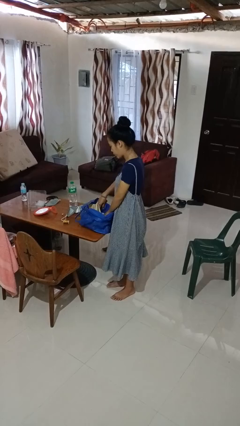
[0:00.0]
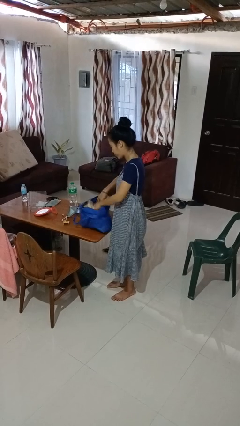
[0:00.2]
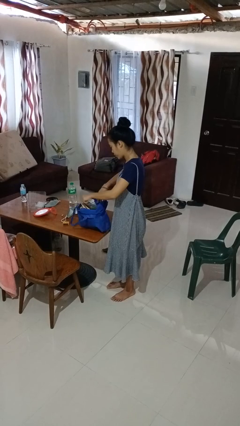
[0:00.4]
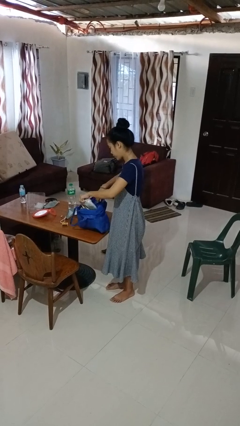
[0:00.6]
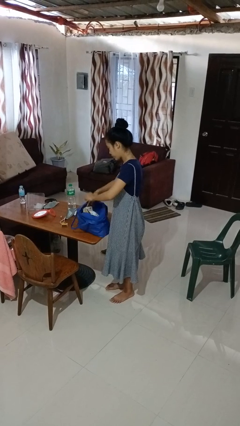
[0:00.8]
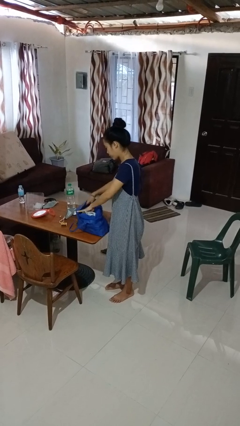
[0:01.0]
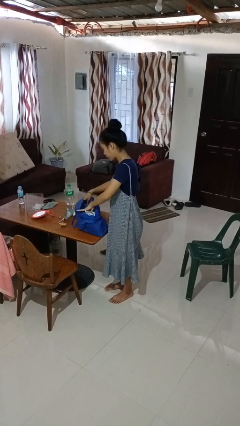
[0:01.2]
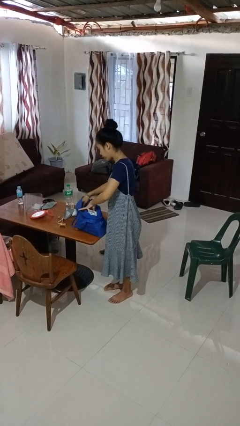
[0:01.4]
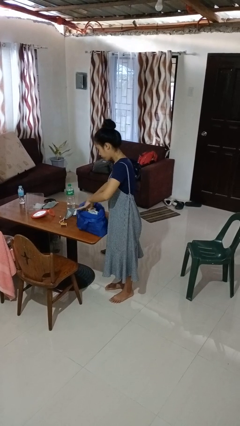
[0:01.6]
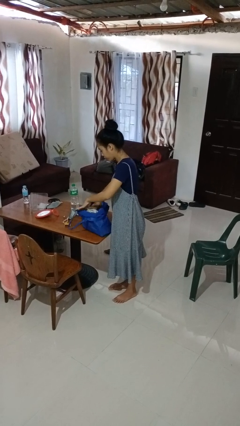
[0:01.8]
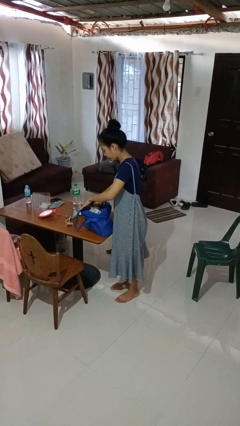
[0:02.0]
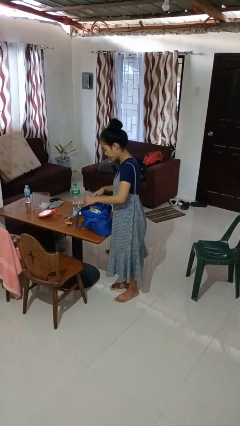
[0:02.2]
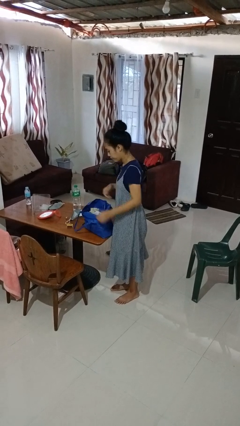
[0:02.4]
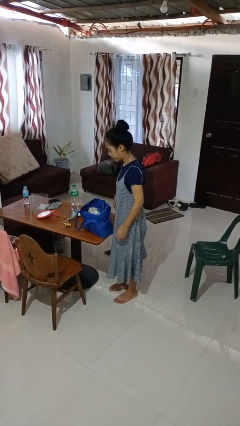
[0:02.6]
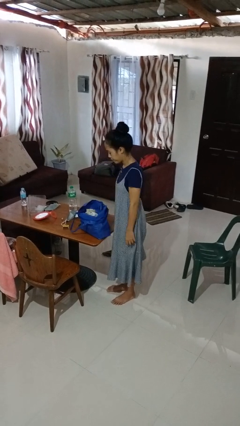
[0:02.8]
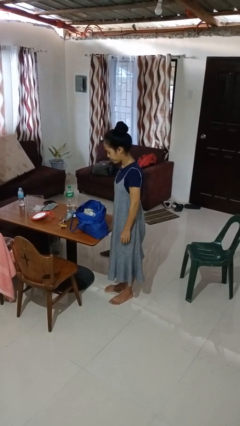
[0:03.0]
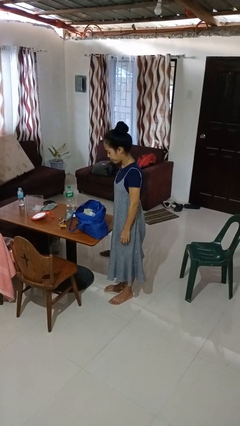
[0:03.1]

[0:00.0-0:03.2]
person searches in bag

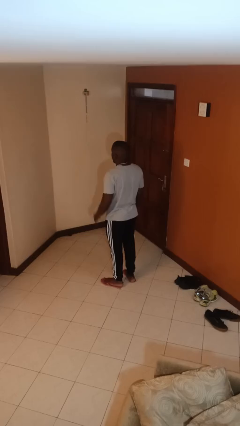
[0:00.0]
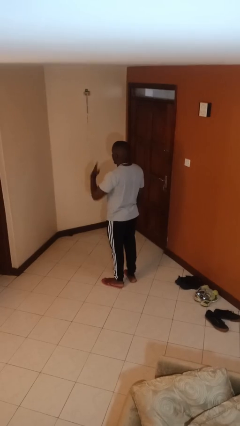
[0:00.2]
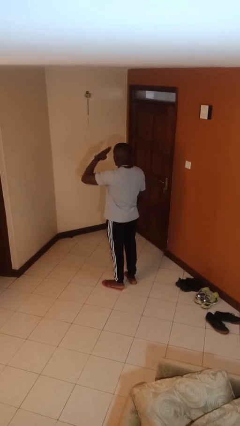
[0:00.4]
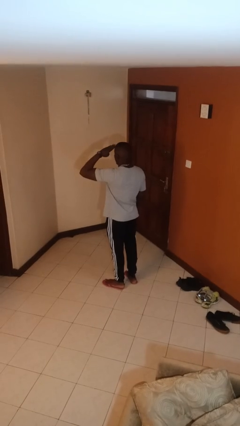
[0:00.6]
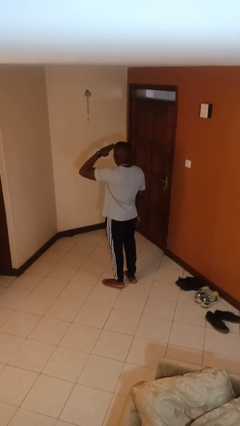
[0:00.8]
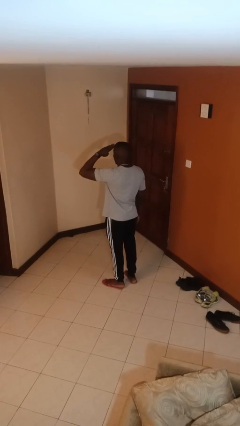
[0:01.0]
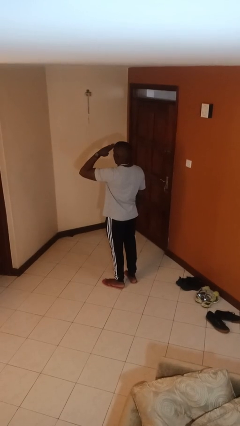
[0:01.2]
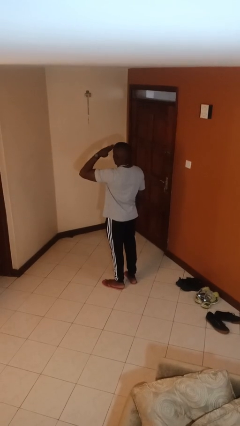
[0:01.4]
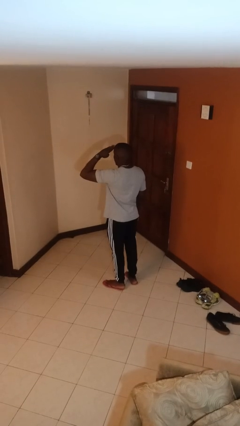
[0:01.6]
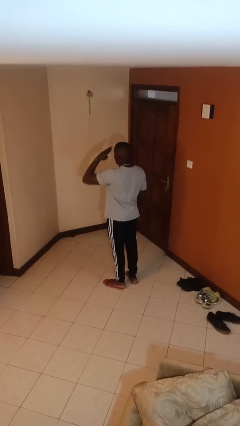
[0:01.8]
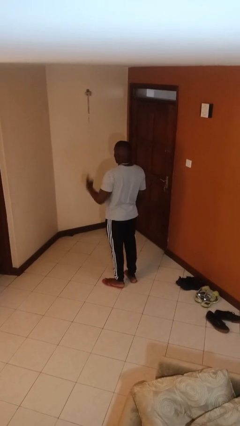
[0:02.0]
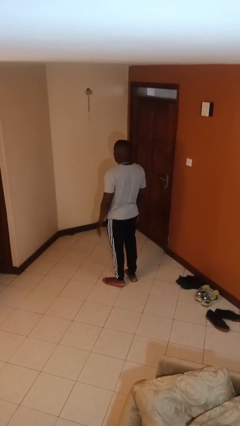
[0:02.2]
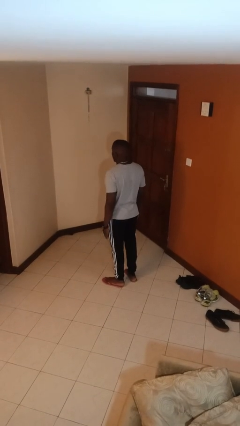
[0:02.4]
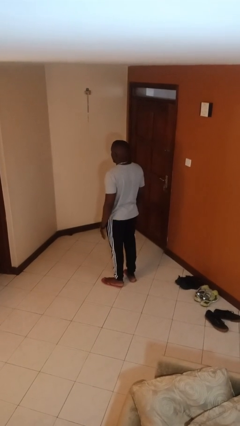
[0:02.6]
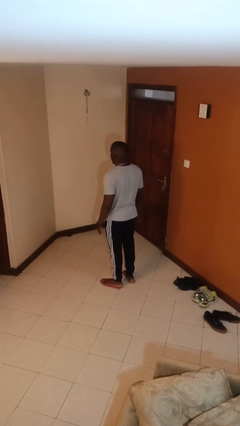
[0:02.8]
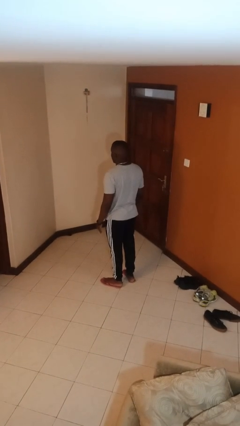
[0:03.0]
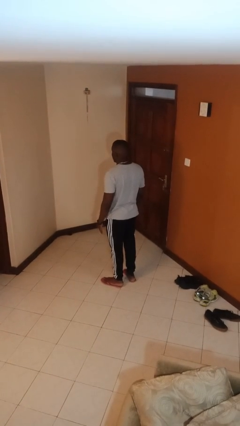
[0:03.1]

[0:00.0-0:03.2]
person salutes

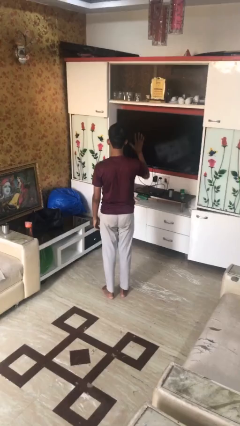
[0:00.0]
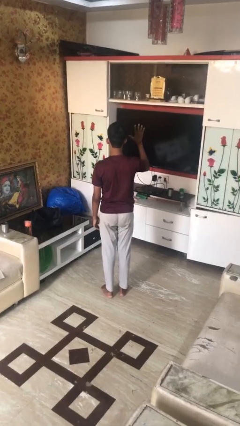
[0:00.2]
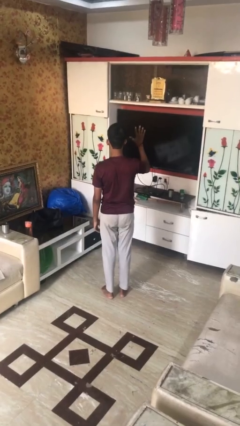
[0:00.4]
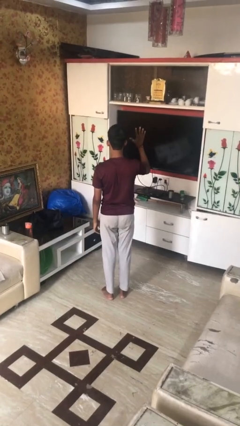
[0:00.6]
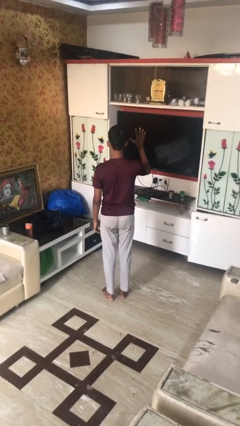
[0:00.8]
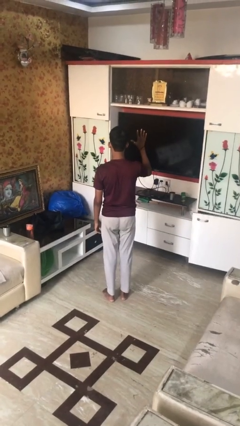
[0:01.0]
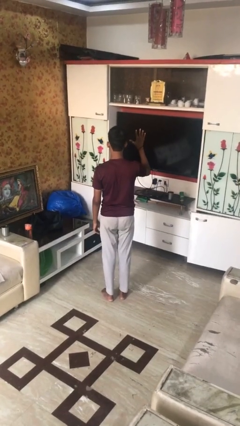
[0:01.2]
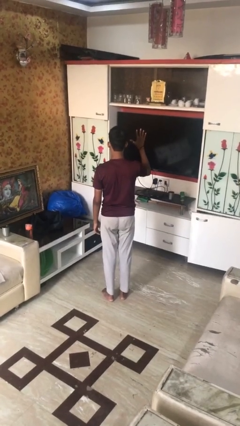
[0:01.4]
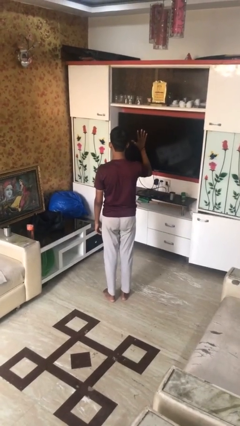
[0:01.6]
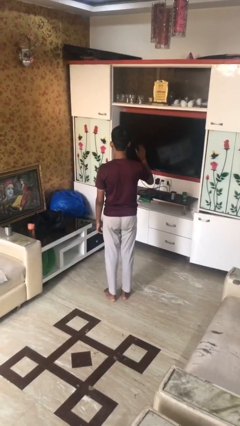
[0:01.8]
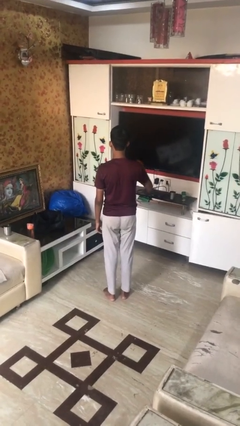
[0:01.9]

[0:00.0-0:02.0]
person gestures number five

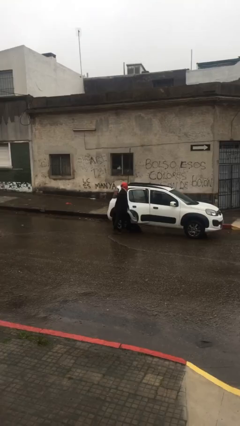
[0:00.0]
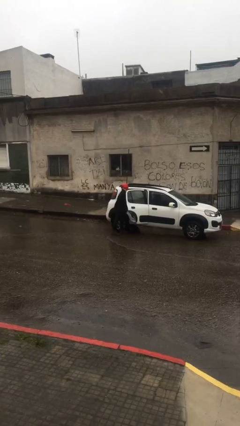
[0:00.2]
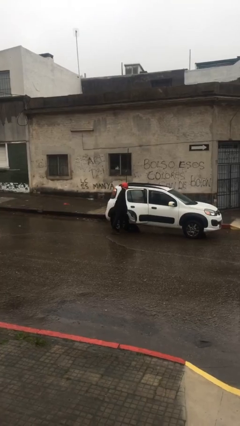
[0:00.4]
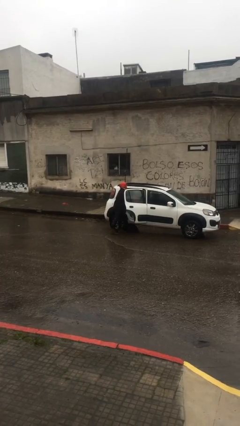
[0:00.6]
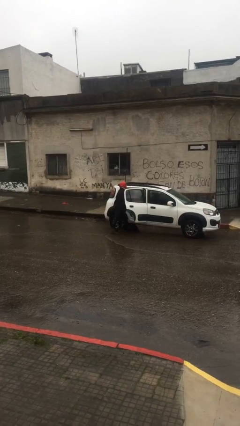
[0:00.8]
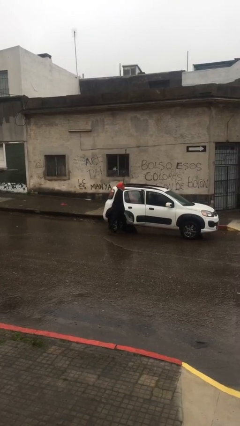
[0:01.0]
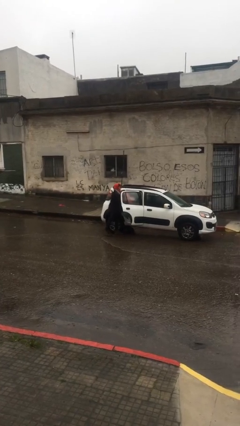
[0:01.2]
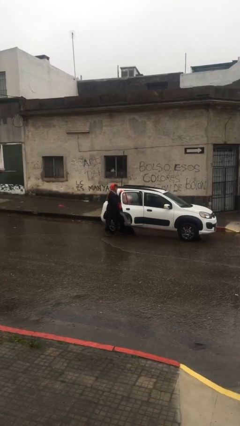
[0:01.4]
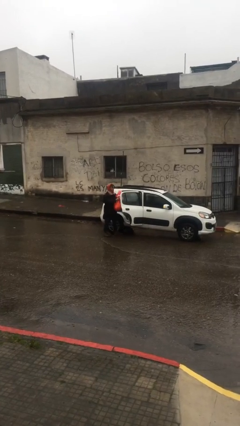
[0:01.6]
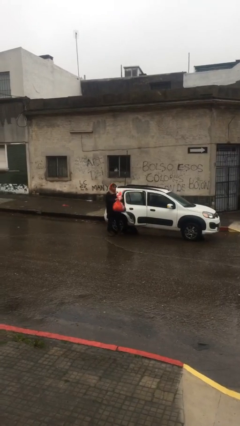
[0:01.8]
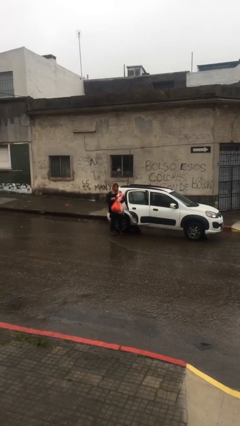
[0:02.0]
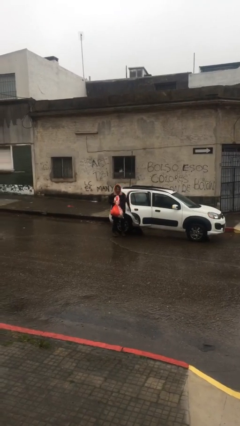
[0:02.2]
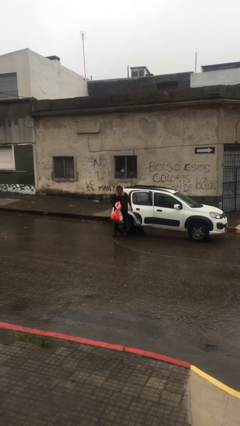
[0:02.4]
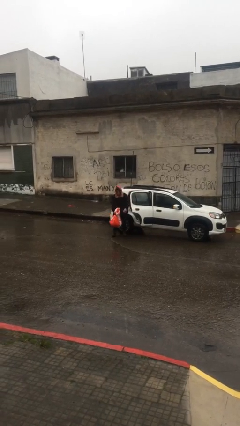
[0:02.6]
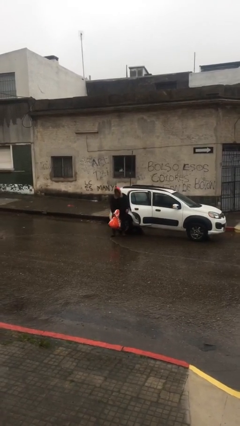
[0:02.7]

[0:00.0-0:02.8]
person unloads car

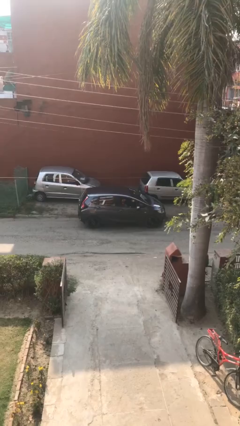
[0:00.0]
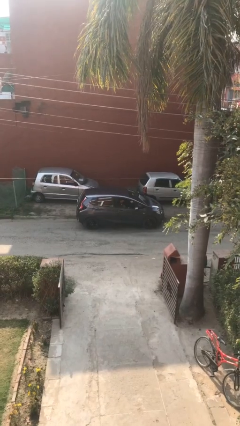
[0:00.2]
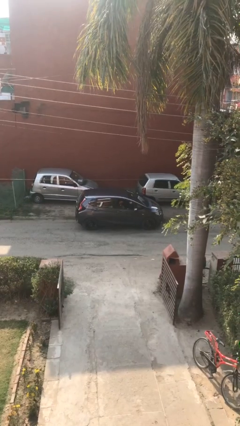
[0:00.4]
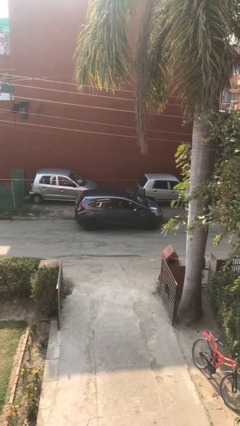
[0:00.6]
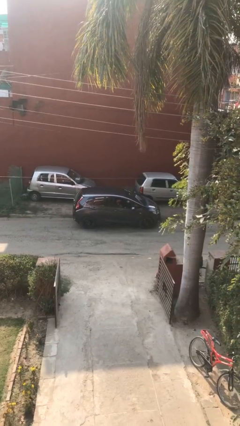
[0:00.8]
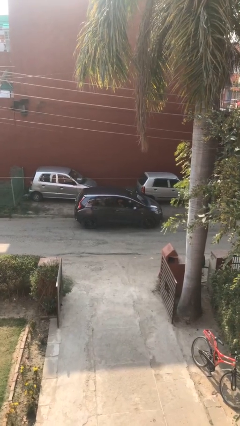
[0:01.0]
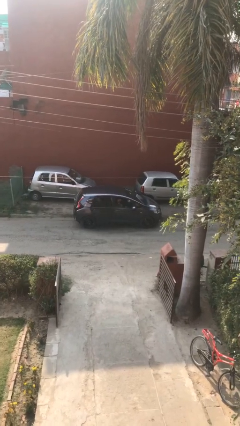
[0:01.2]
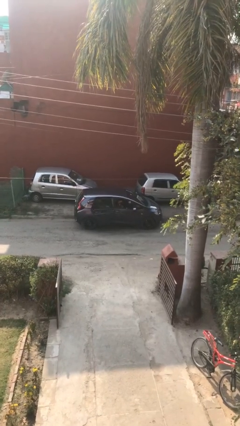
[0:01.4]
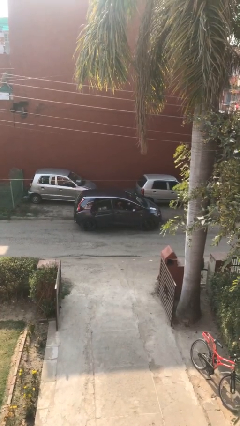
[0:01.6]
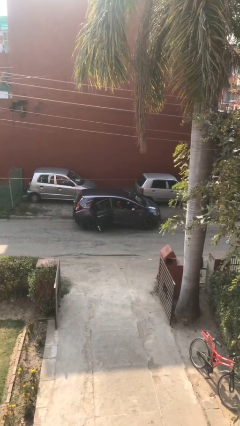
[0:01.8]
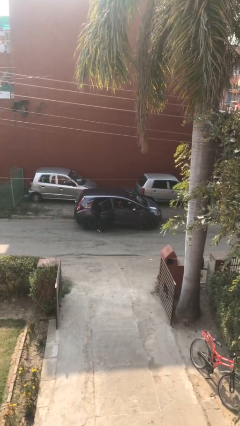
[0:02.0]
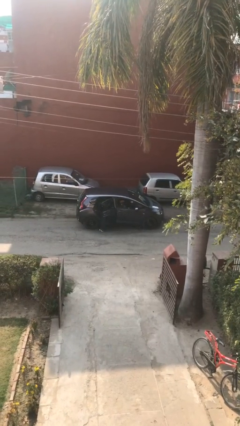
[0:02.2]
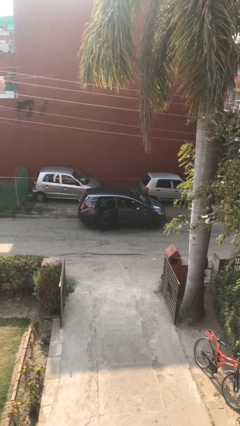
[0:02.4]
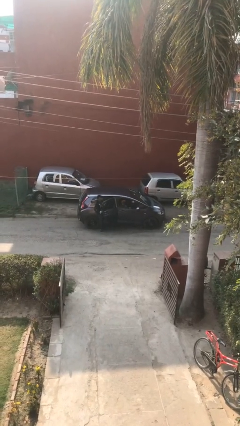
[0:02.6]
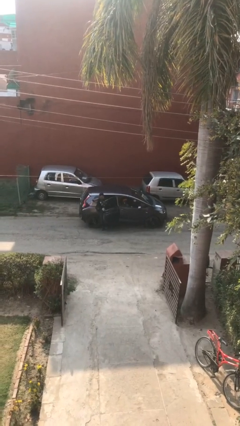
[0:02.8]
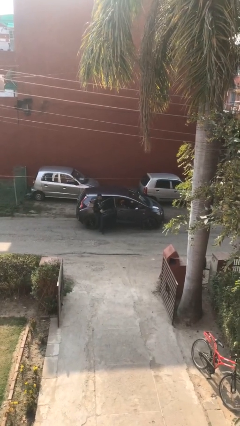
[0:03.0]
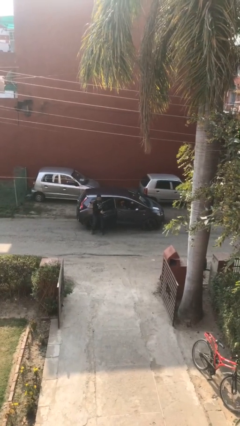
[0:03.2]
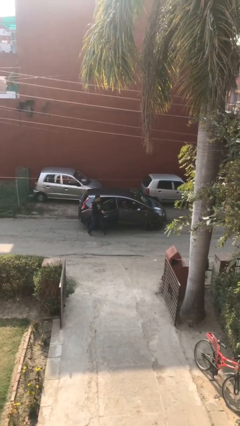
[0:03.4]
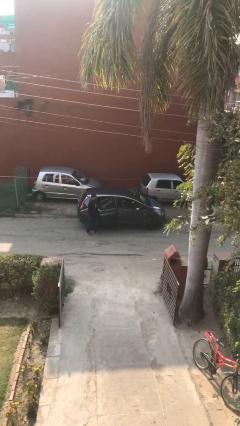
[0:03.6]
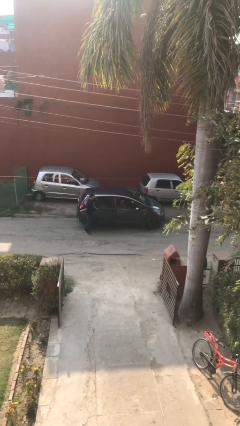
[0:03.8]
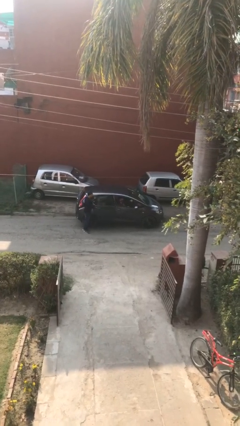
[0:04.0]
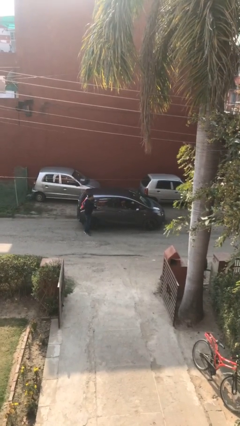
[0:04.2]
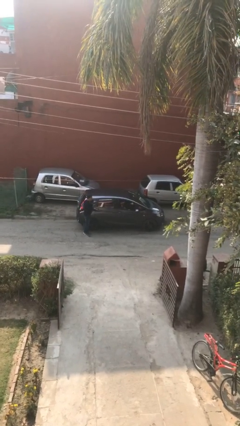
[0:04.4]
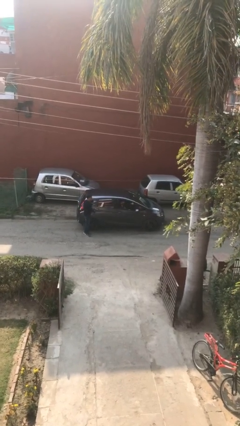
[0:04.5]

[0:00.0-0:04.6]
car drops off person

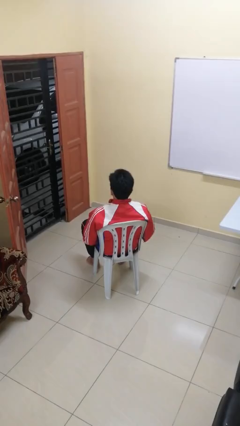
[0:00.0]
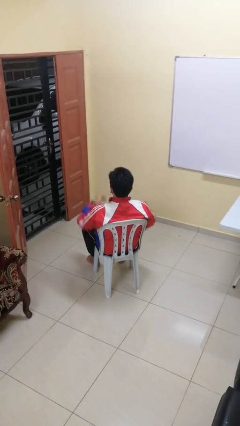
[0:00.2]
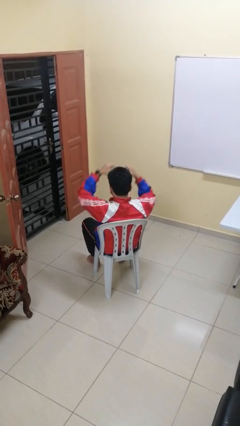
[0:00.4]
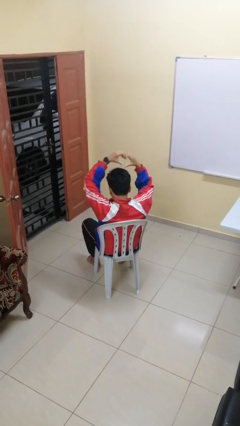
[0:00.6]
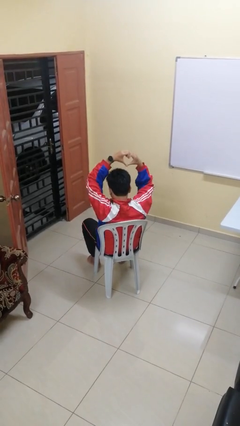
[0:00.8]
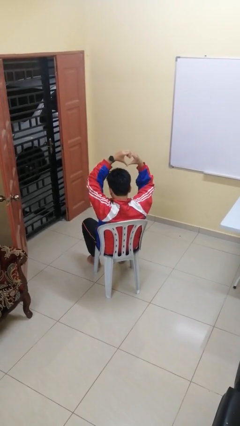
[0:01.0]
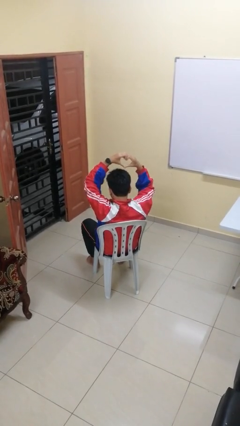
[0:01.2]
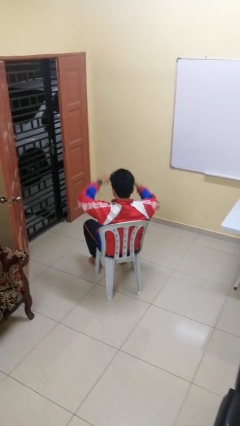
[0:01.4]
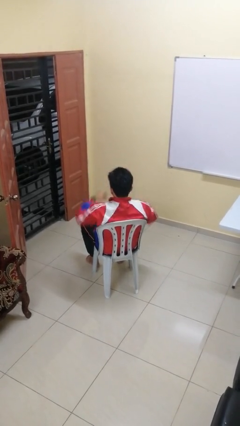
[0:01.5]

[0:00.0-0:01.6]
person gestures heart
